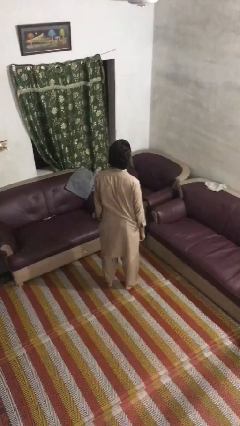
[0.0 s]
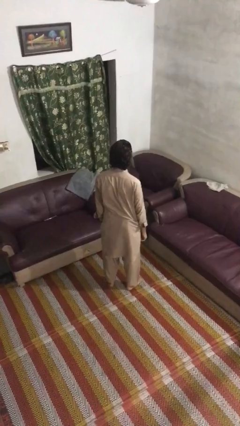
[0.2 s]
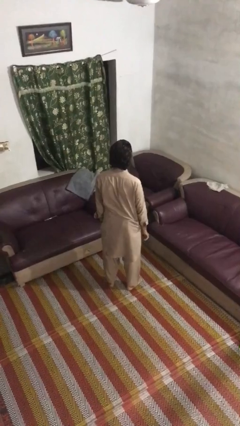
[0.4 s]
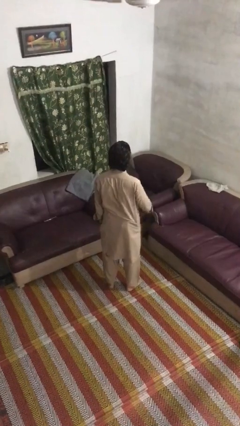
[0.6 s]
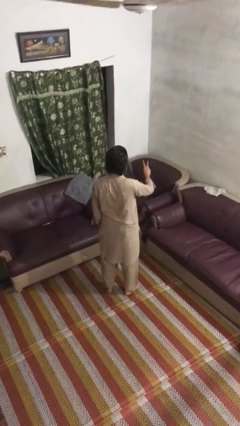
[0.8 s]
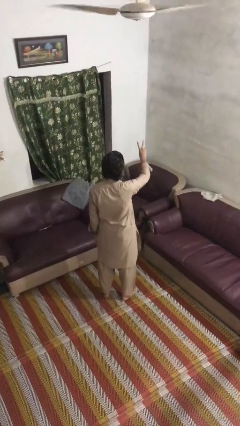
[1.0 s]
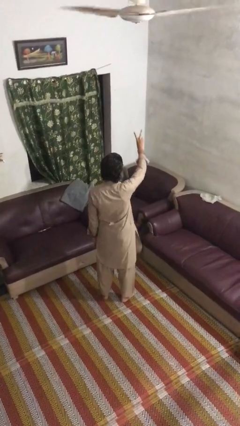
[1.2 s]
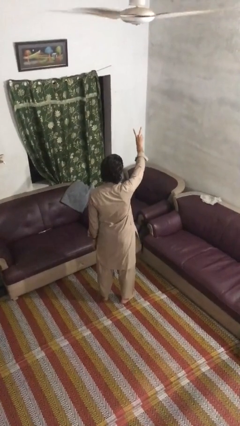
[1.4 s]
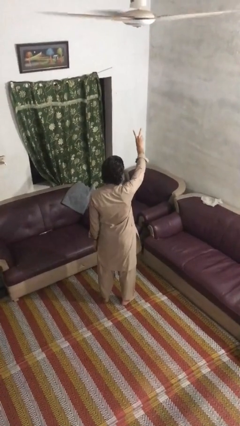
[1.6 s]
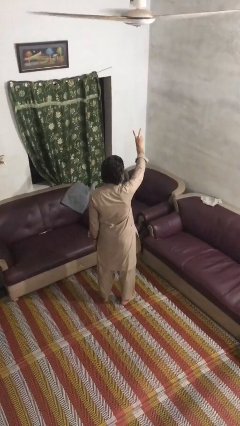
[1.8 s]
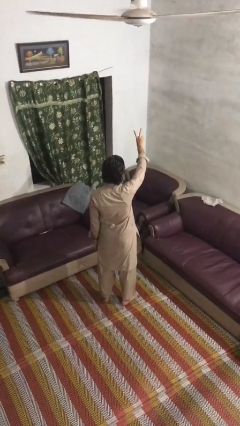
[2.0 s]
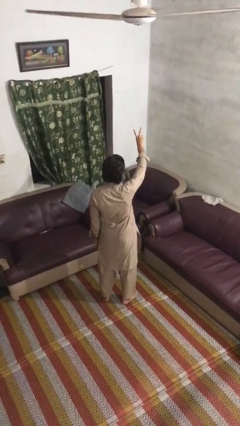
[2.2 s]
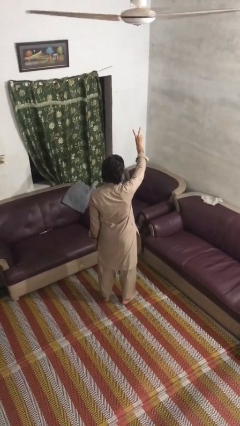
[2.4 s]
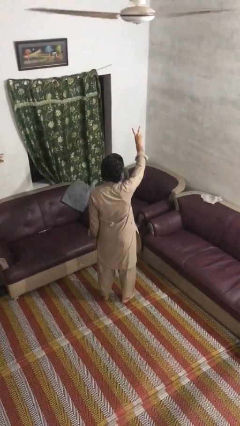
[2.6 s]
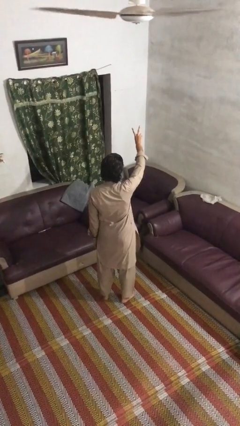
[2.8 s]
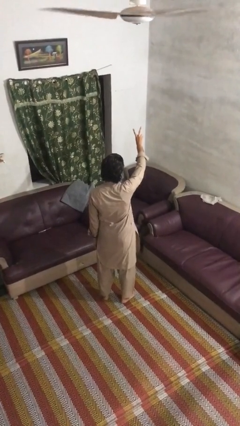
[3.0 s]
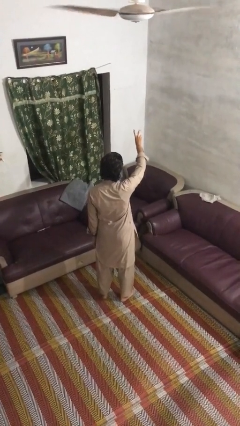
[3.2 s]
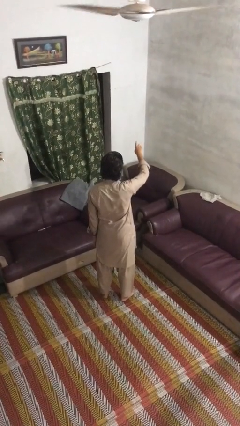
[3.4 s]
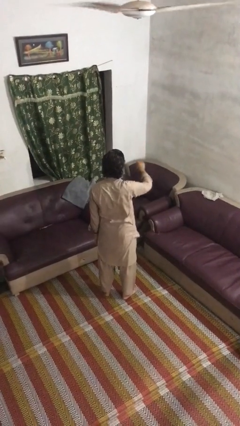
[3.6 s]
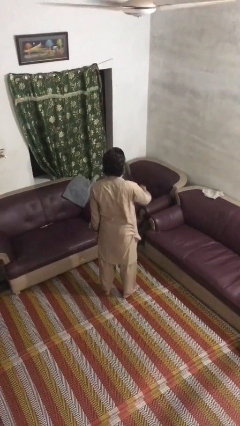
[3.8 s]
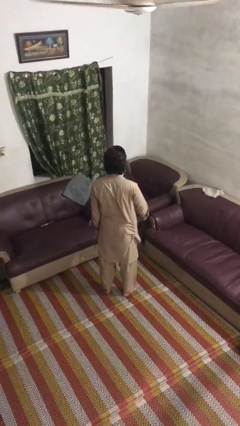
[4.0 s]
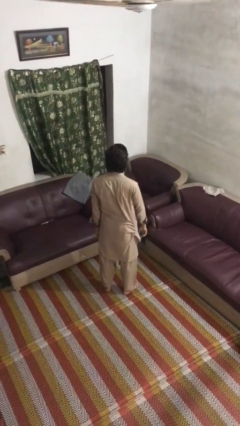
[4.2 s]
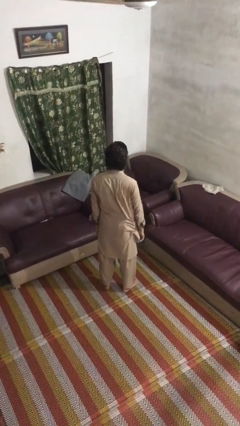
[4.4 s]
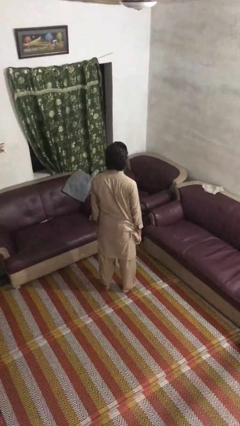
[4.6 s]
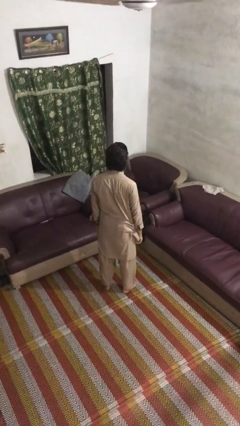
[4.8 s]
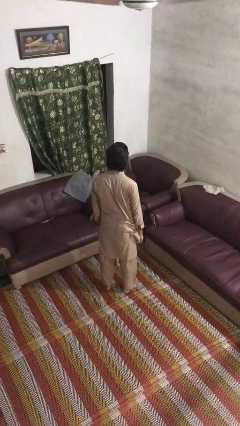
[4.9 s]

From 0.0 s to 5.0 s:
person gestures peace

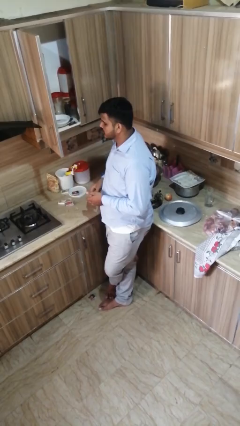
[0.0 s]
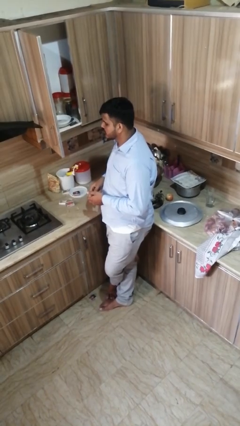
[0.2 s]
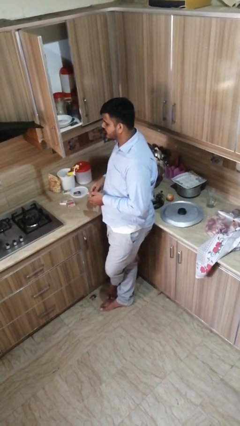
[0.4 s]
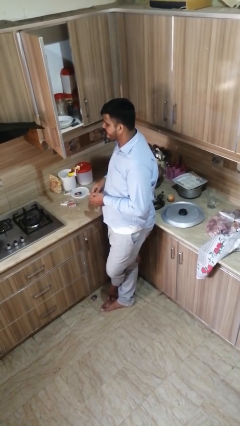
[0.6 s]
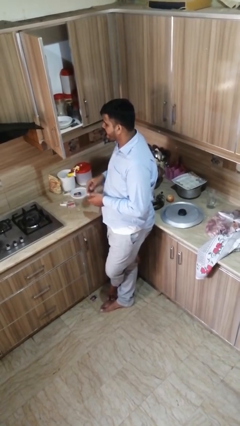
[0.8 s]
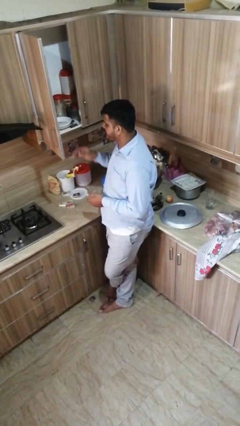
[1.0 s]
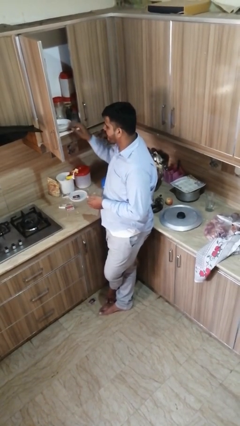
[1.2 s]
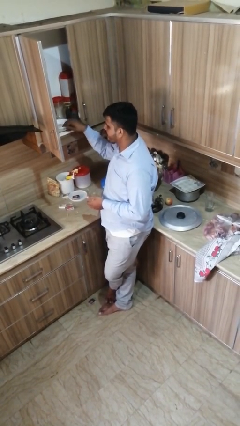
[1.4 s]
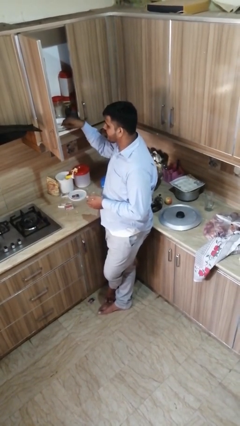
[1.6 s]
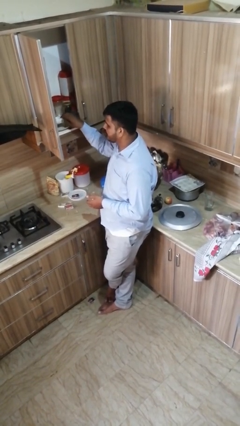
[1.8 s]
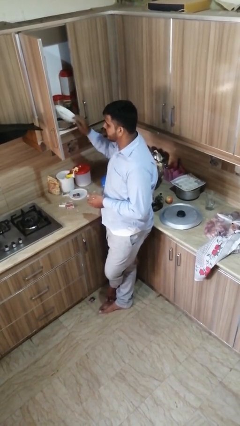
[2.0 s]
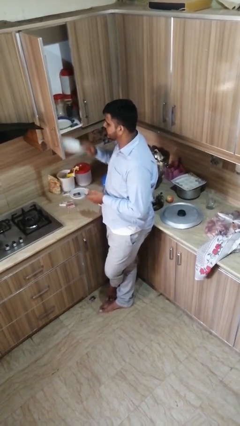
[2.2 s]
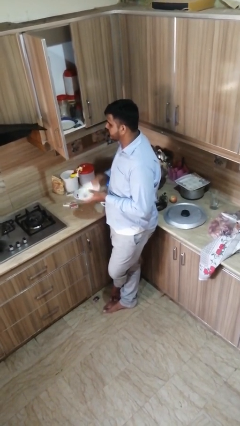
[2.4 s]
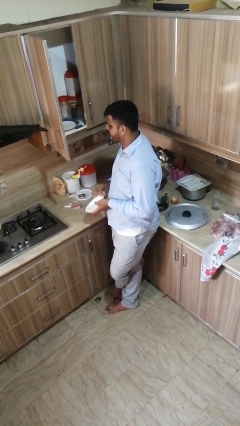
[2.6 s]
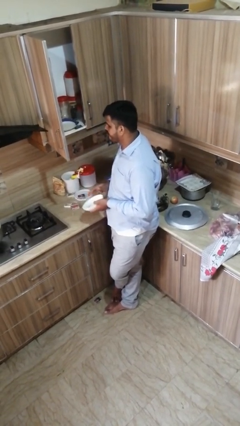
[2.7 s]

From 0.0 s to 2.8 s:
person takes object from cabinet

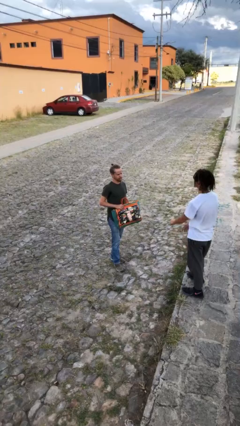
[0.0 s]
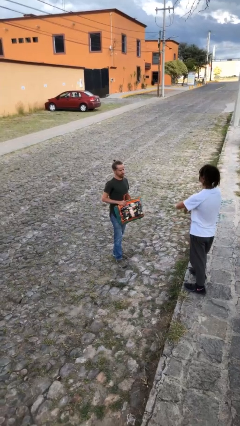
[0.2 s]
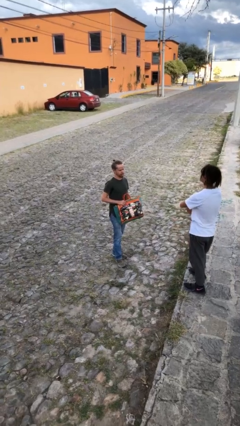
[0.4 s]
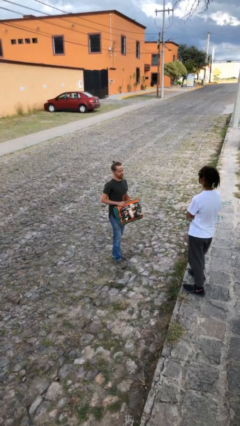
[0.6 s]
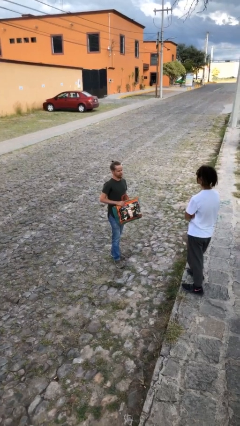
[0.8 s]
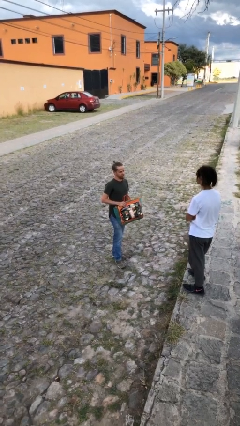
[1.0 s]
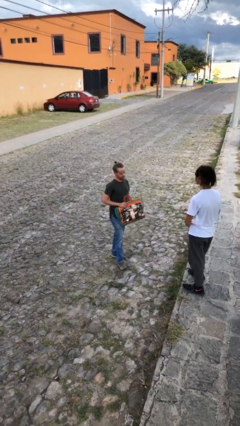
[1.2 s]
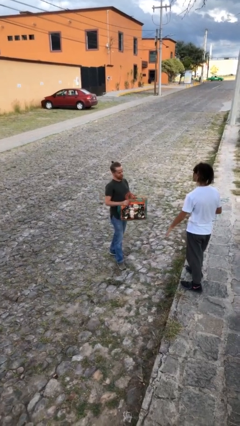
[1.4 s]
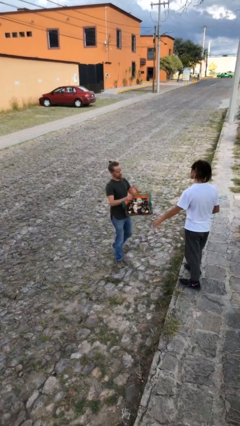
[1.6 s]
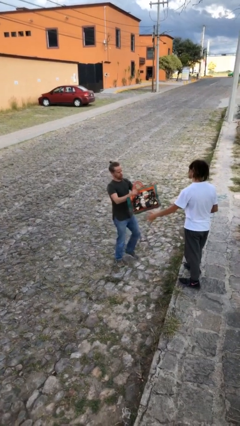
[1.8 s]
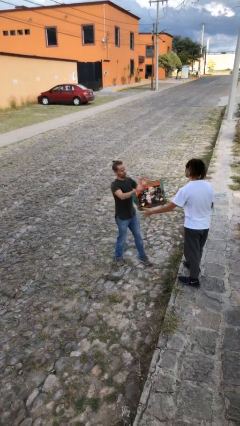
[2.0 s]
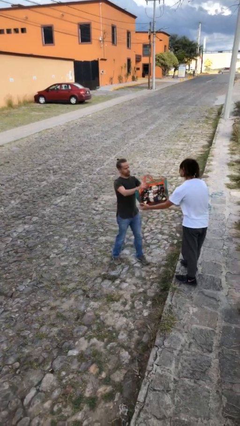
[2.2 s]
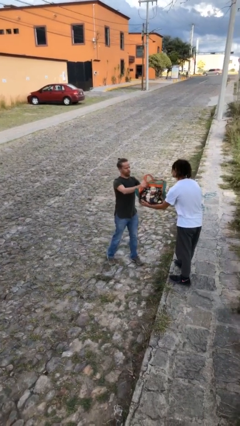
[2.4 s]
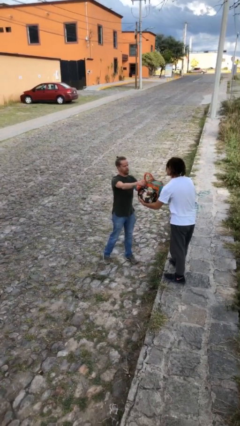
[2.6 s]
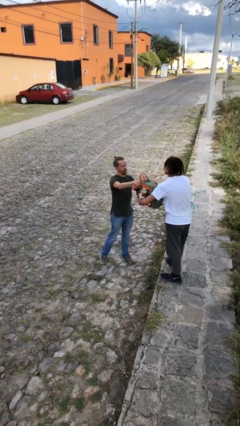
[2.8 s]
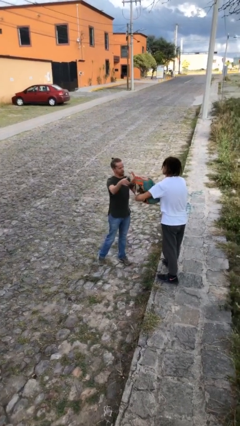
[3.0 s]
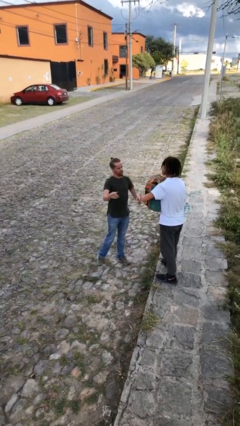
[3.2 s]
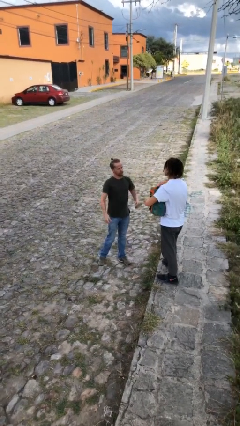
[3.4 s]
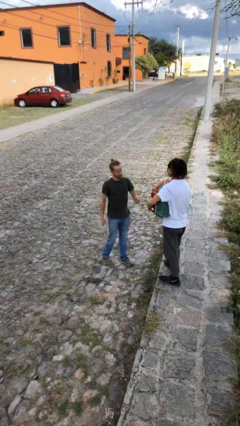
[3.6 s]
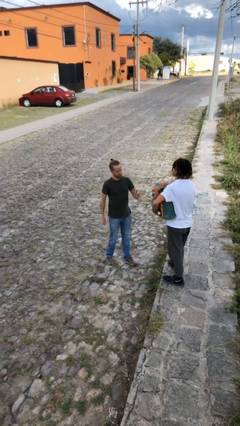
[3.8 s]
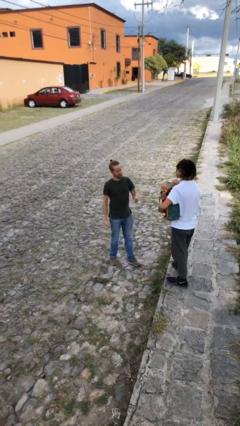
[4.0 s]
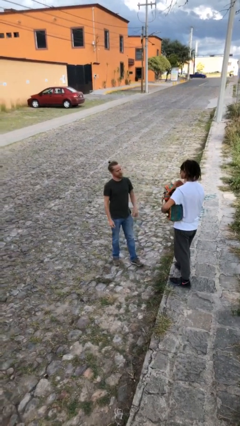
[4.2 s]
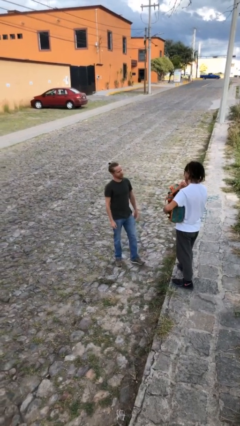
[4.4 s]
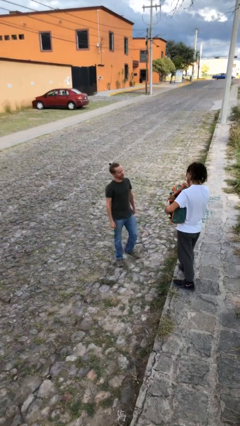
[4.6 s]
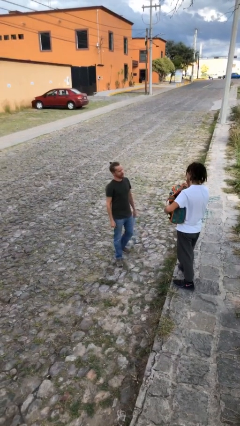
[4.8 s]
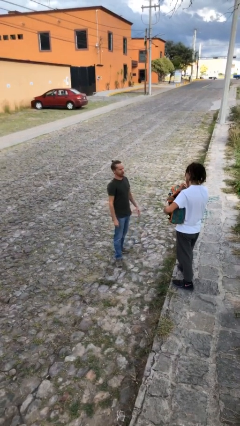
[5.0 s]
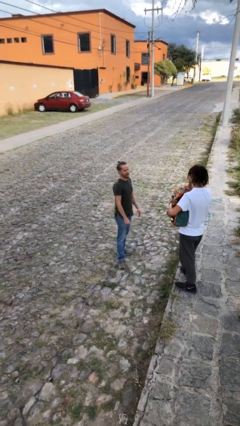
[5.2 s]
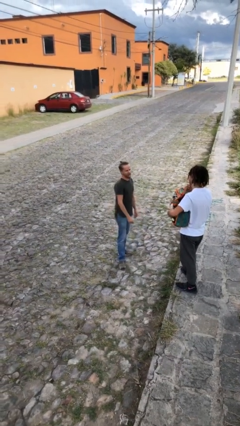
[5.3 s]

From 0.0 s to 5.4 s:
person transfers object to person

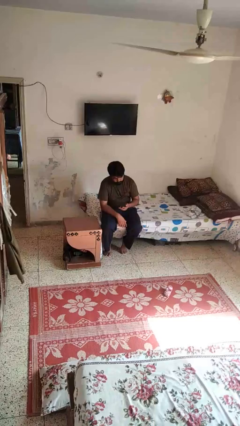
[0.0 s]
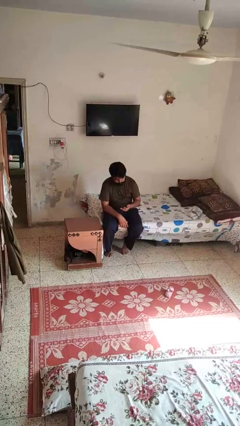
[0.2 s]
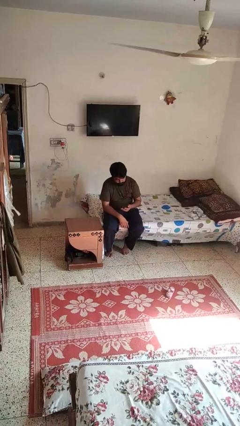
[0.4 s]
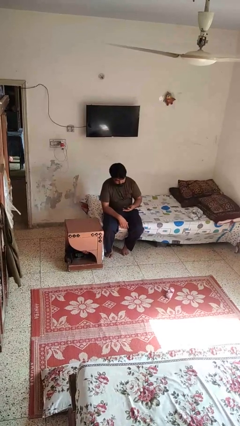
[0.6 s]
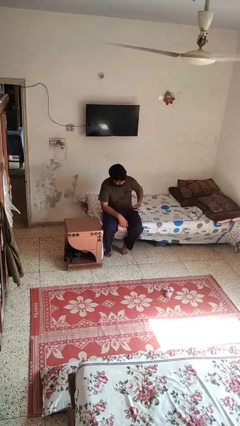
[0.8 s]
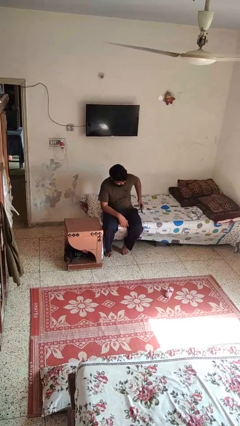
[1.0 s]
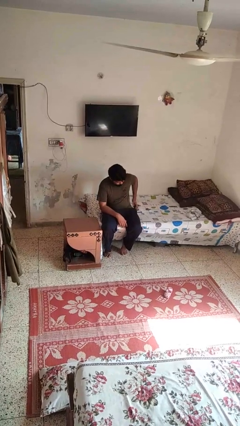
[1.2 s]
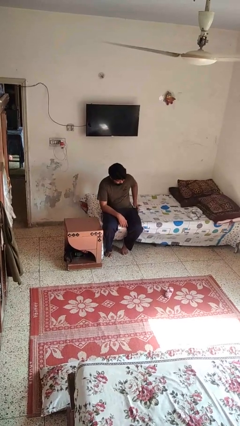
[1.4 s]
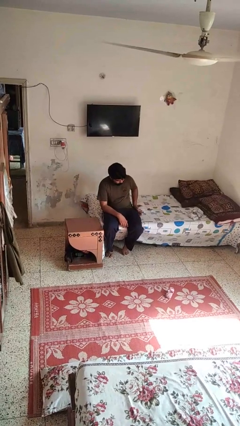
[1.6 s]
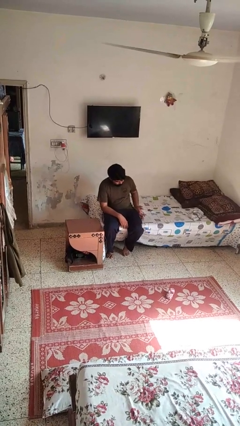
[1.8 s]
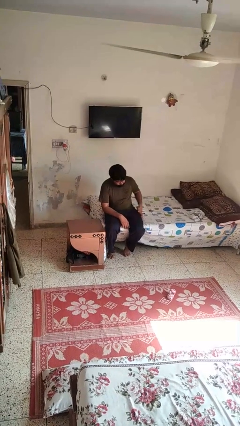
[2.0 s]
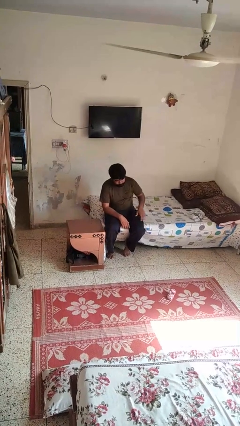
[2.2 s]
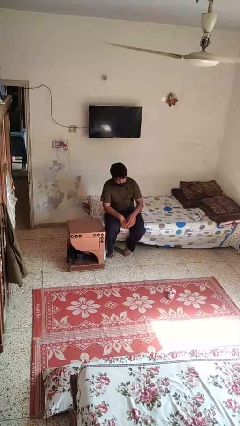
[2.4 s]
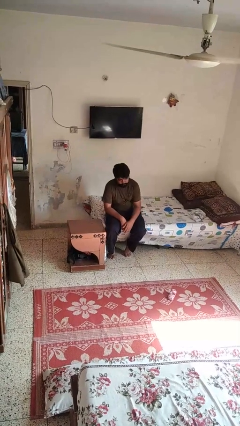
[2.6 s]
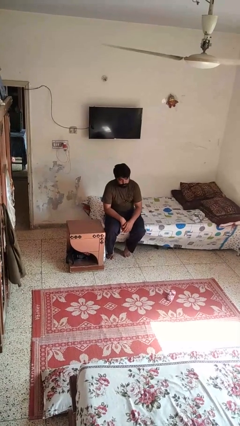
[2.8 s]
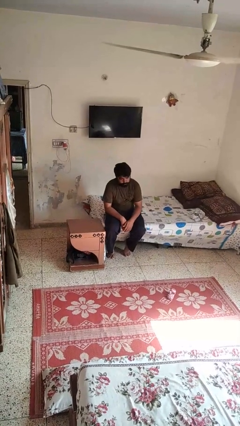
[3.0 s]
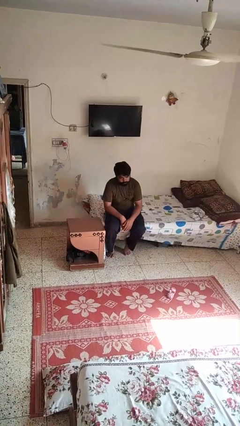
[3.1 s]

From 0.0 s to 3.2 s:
person puts phone into pocket

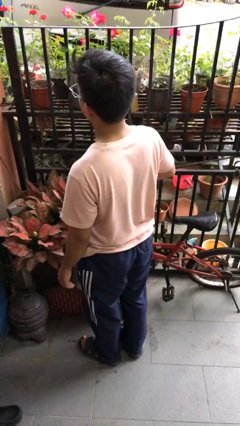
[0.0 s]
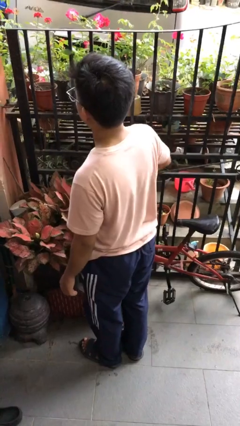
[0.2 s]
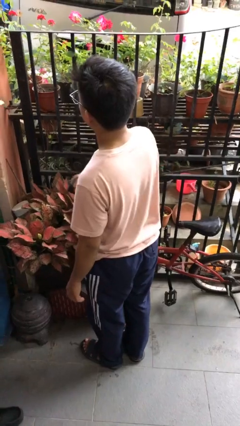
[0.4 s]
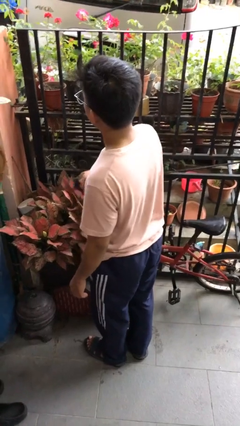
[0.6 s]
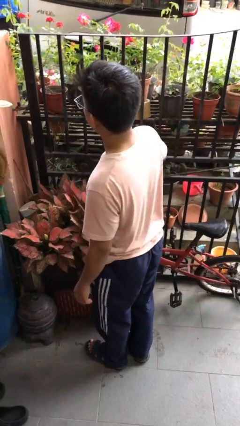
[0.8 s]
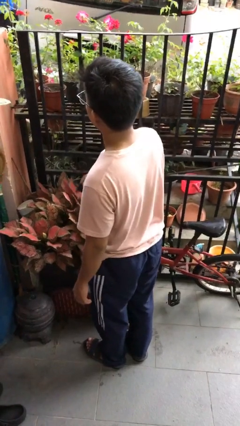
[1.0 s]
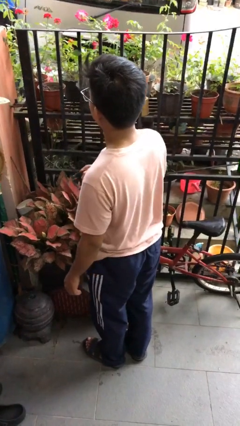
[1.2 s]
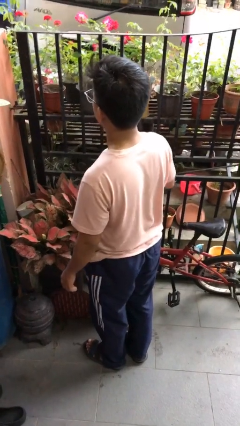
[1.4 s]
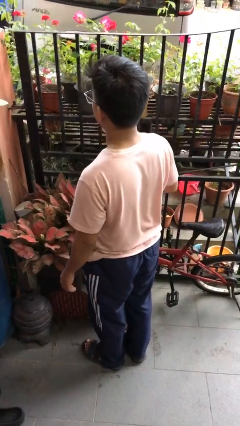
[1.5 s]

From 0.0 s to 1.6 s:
person waters houseplant
